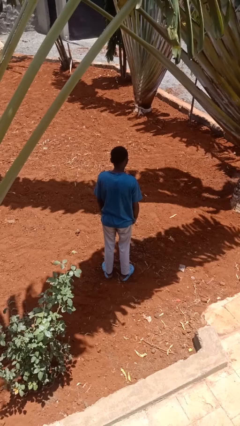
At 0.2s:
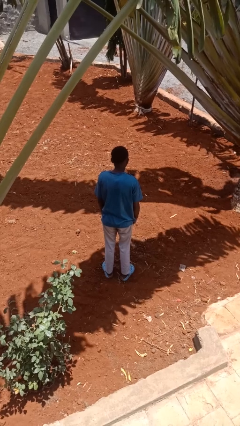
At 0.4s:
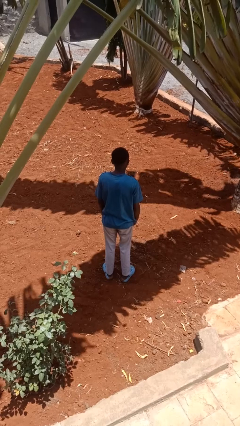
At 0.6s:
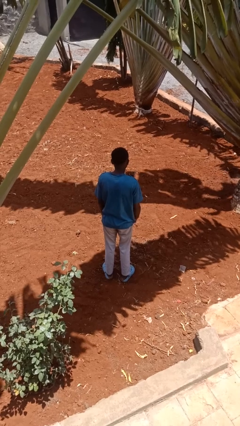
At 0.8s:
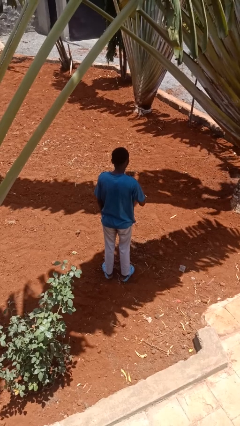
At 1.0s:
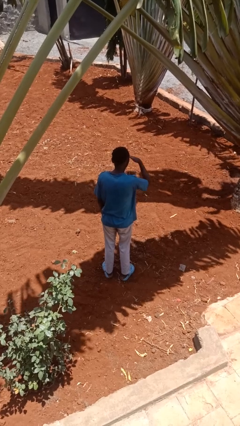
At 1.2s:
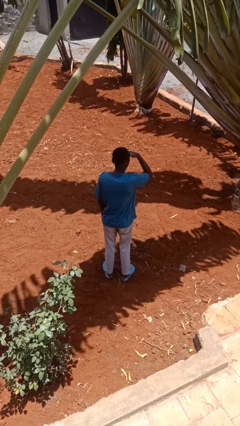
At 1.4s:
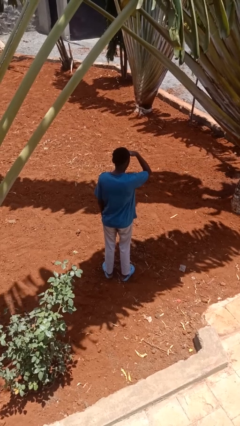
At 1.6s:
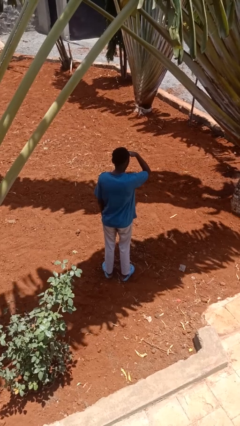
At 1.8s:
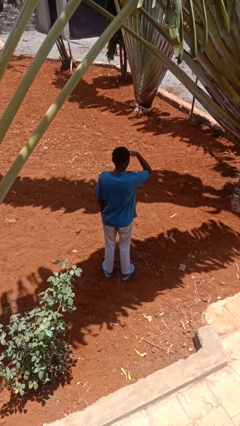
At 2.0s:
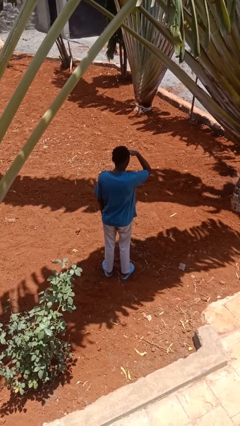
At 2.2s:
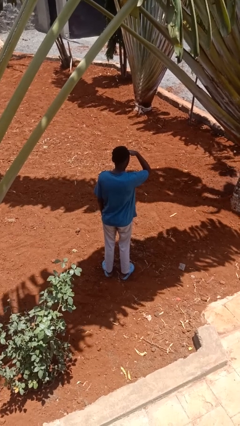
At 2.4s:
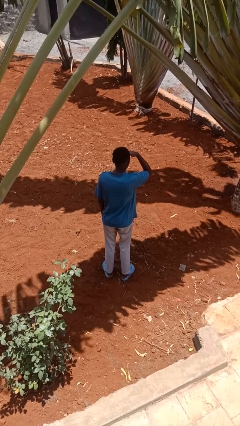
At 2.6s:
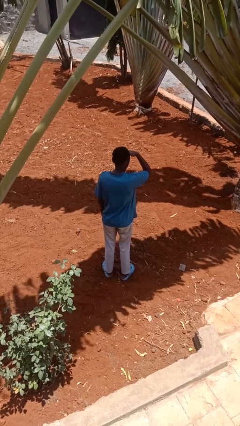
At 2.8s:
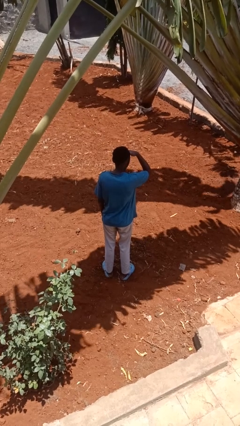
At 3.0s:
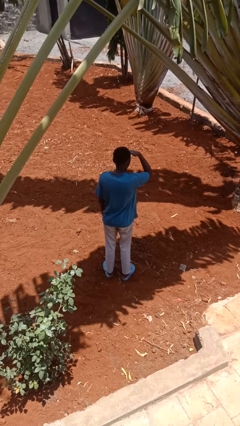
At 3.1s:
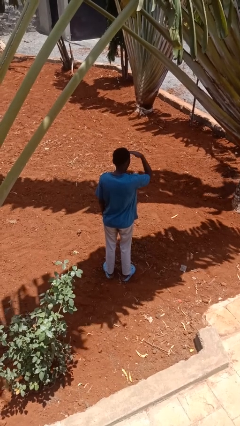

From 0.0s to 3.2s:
person shades eyes

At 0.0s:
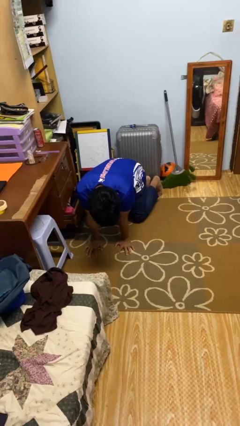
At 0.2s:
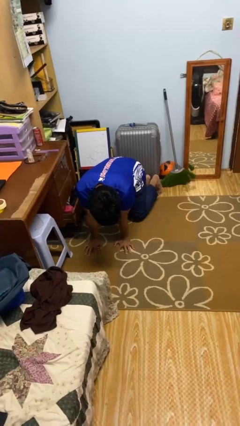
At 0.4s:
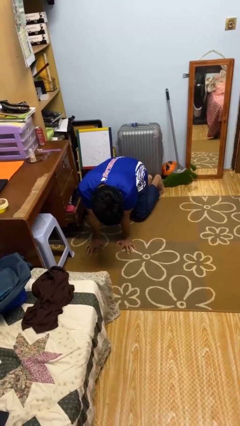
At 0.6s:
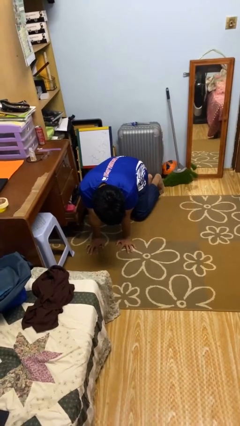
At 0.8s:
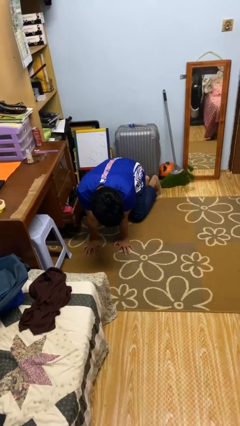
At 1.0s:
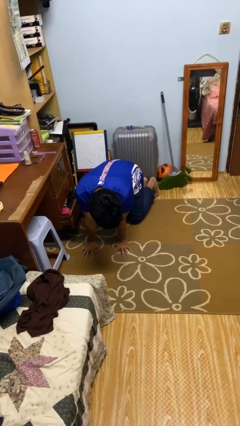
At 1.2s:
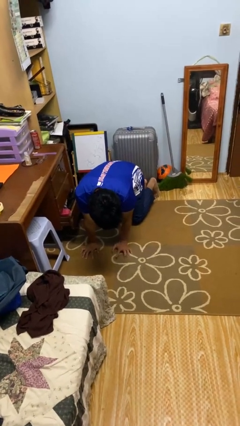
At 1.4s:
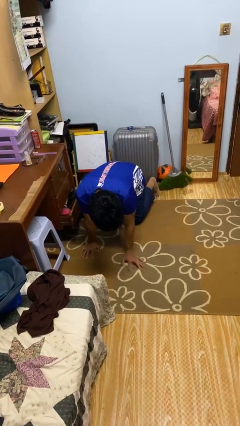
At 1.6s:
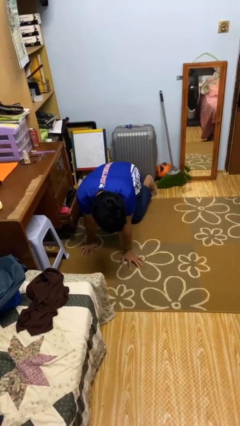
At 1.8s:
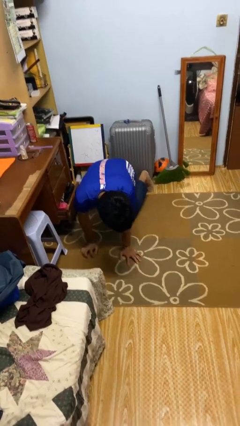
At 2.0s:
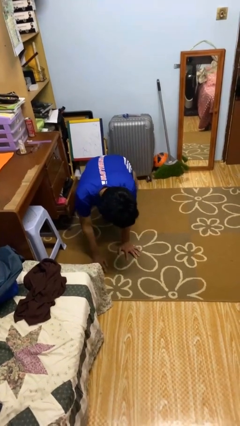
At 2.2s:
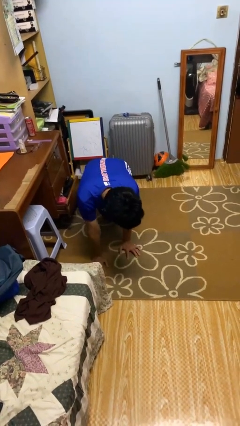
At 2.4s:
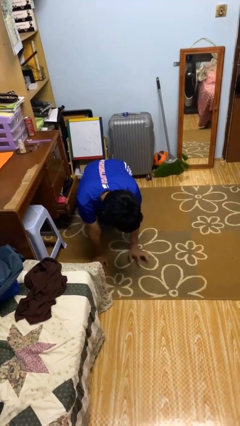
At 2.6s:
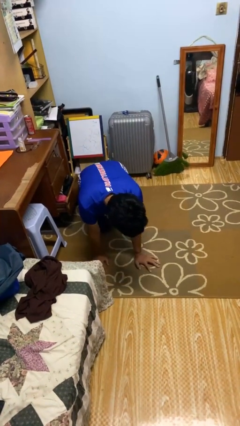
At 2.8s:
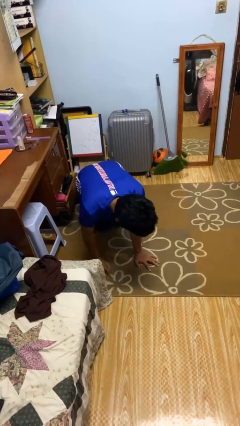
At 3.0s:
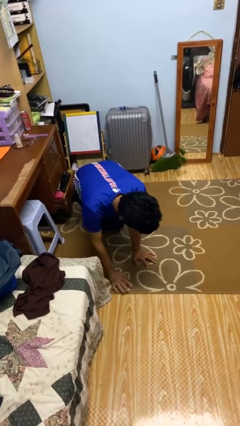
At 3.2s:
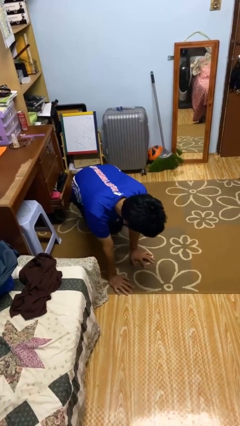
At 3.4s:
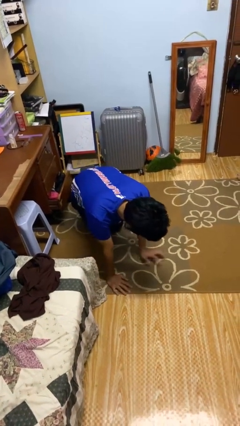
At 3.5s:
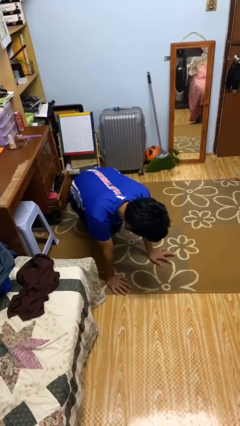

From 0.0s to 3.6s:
person crawls

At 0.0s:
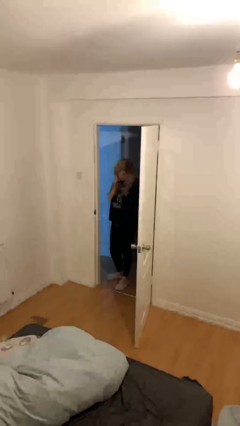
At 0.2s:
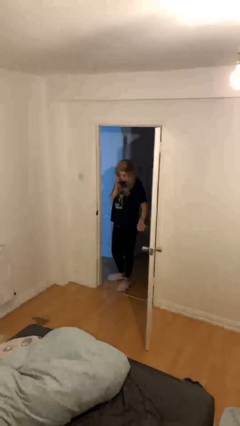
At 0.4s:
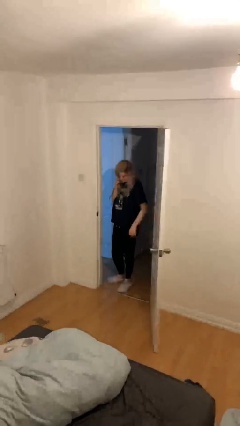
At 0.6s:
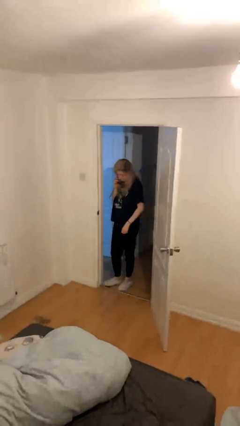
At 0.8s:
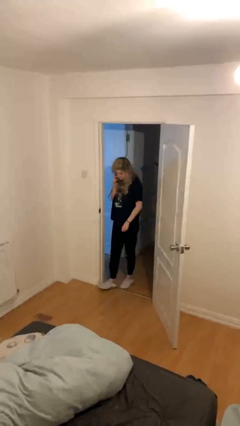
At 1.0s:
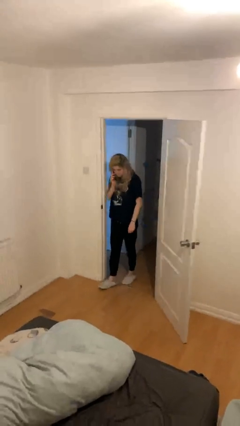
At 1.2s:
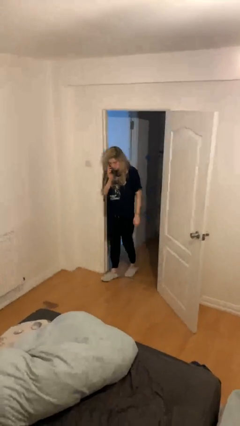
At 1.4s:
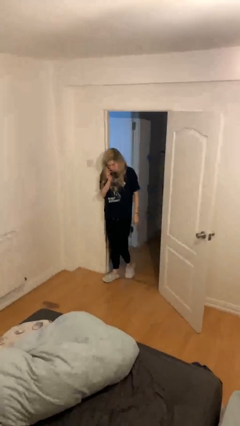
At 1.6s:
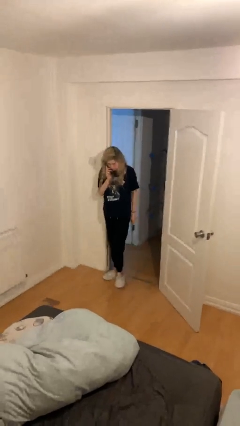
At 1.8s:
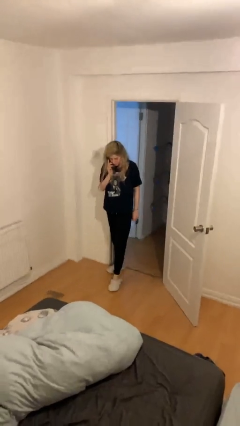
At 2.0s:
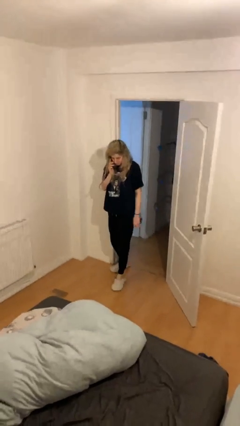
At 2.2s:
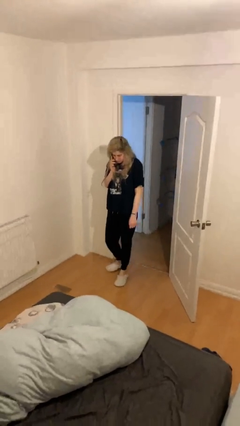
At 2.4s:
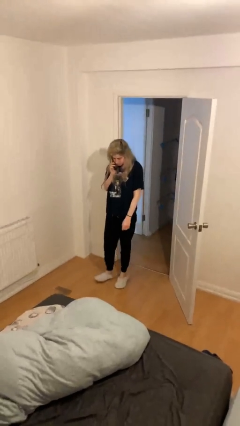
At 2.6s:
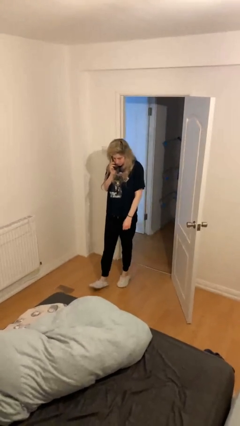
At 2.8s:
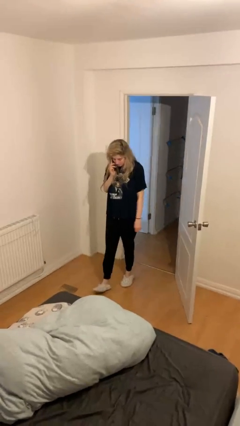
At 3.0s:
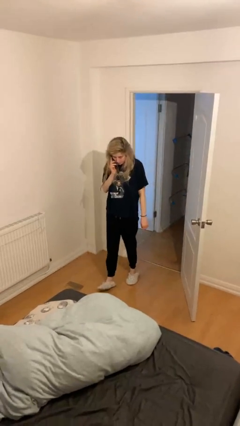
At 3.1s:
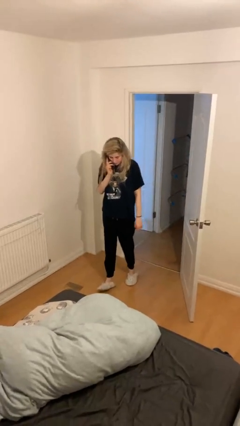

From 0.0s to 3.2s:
person enters scene through structure

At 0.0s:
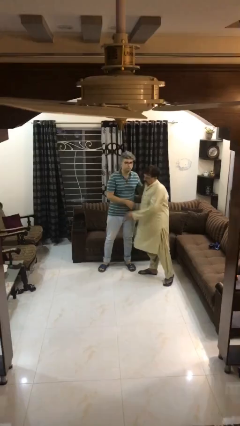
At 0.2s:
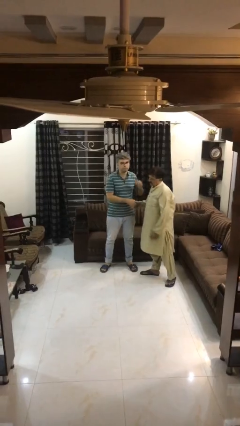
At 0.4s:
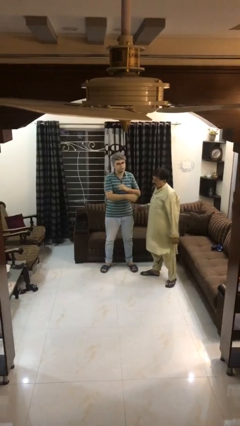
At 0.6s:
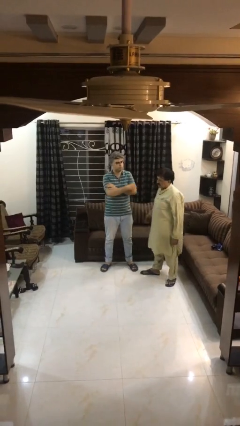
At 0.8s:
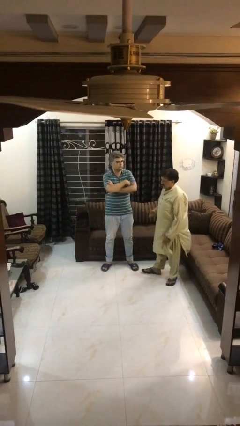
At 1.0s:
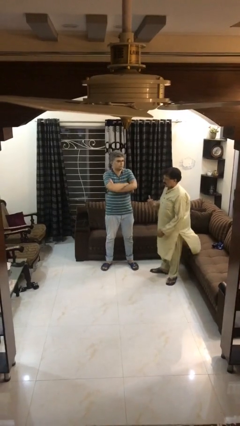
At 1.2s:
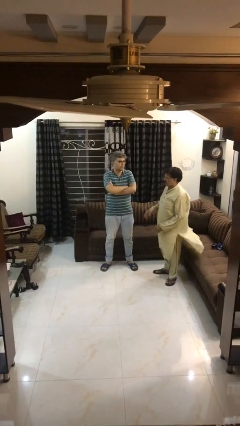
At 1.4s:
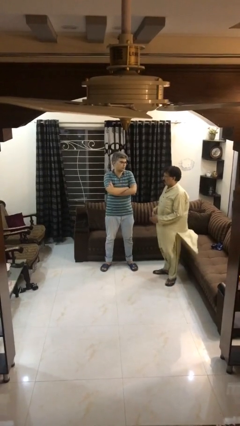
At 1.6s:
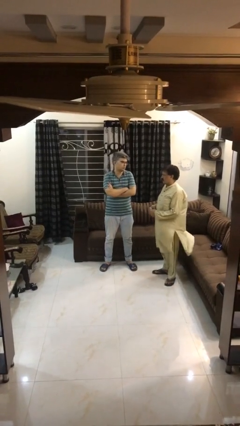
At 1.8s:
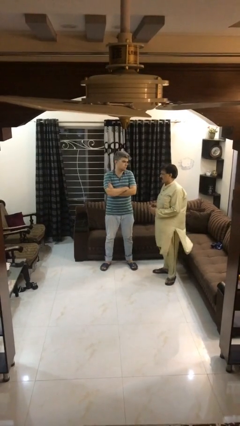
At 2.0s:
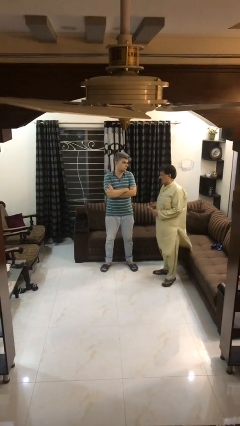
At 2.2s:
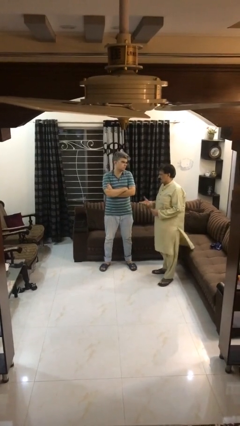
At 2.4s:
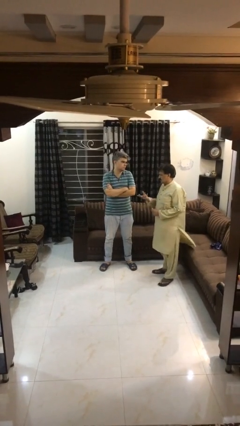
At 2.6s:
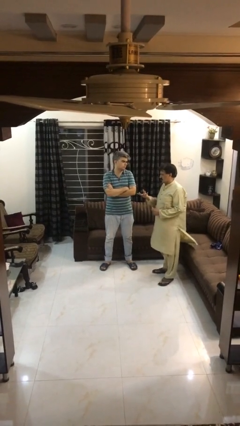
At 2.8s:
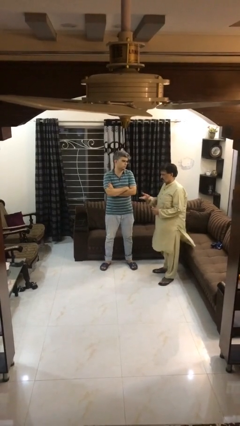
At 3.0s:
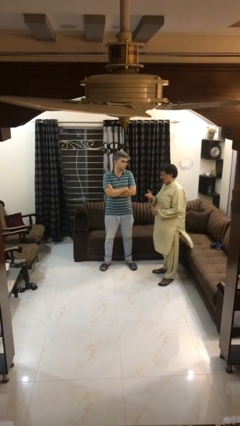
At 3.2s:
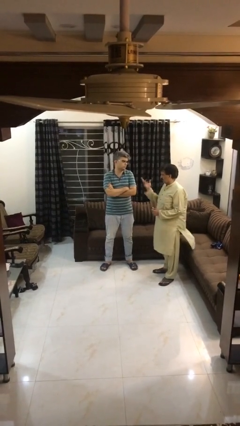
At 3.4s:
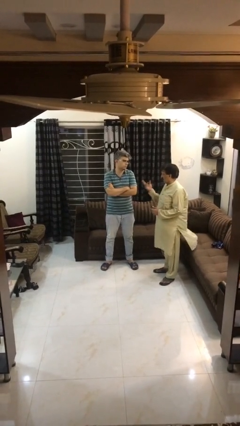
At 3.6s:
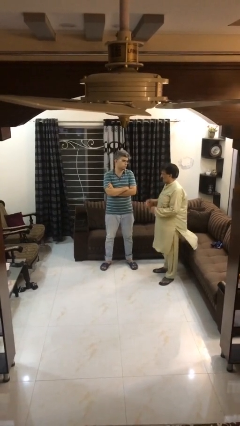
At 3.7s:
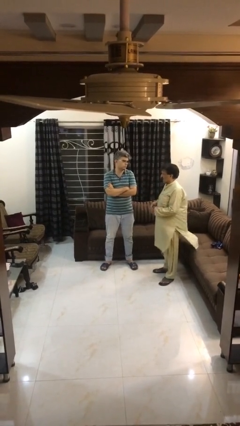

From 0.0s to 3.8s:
person talks to person

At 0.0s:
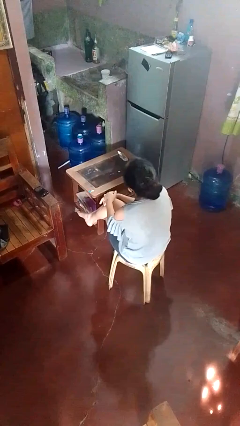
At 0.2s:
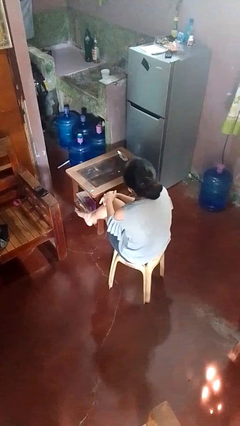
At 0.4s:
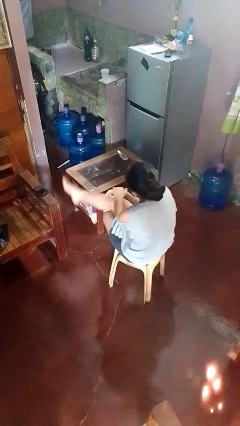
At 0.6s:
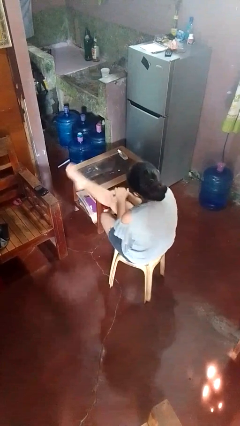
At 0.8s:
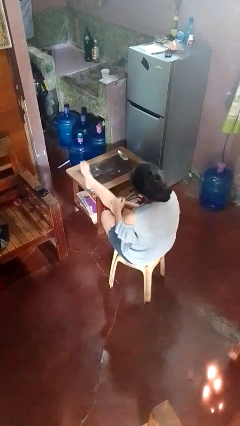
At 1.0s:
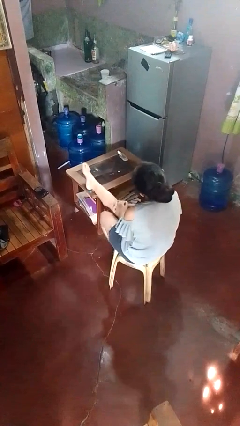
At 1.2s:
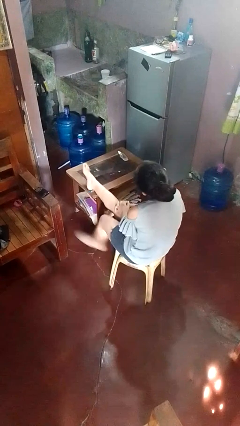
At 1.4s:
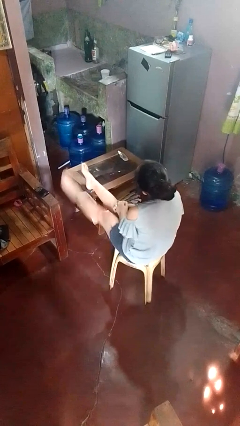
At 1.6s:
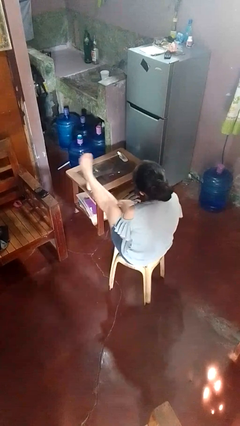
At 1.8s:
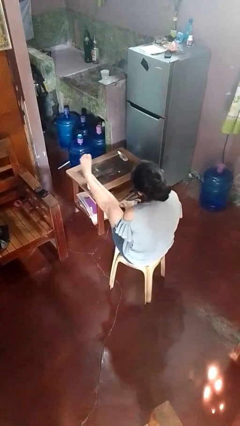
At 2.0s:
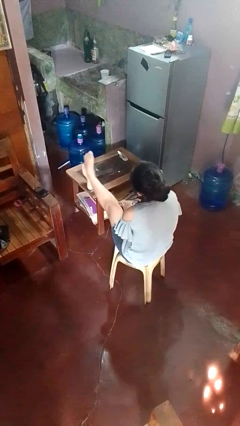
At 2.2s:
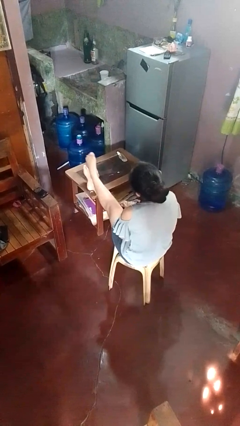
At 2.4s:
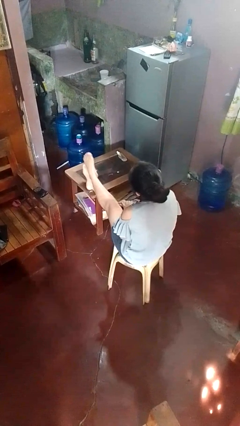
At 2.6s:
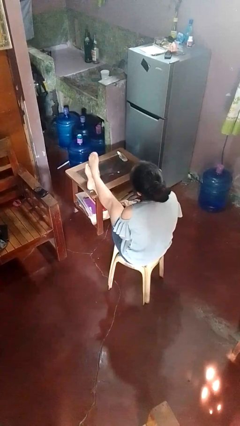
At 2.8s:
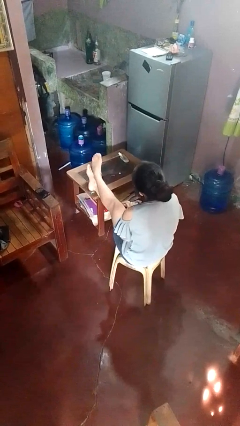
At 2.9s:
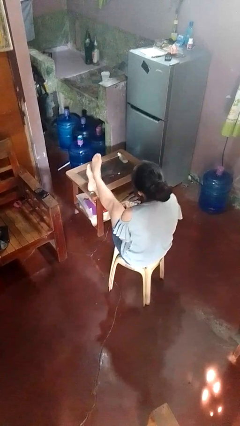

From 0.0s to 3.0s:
person puts feet up

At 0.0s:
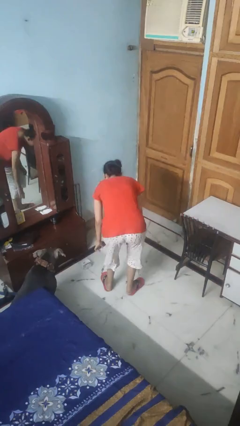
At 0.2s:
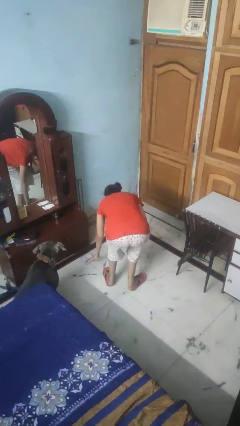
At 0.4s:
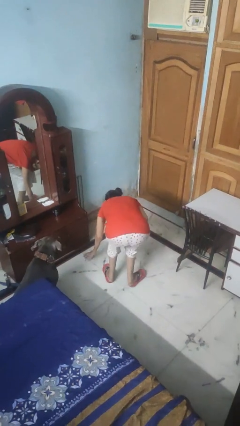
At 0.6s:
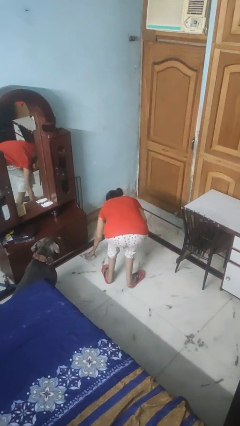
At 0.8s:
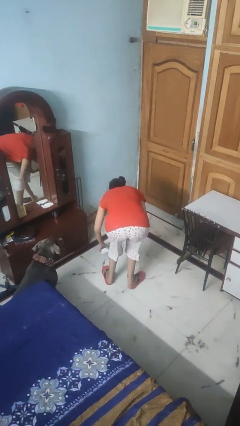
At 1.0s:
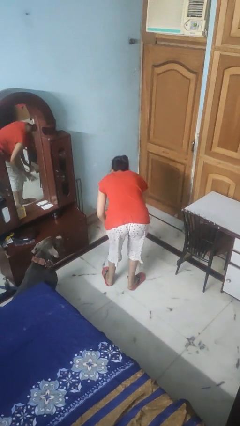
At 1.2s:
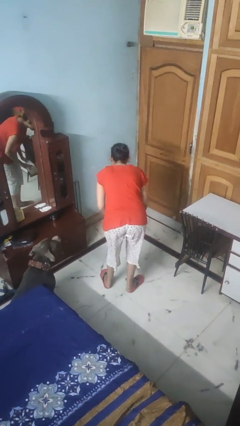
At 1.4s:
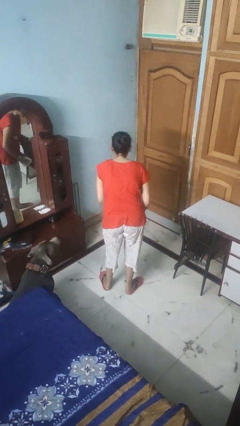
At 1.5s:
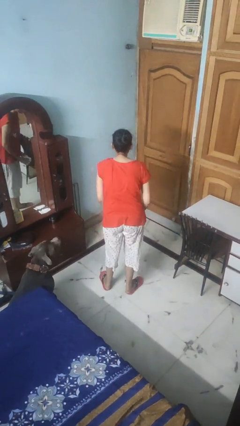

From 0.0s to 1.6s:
person picks up object from floor
